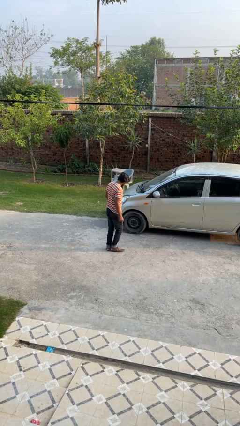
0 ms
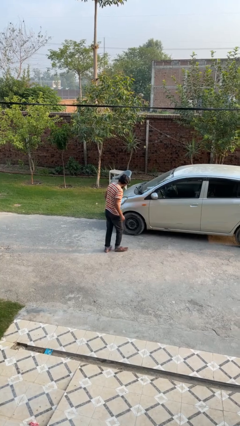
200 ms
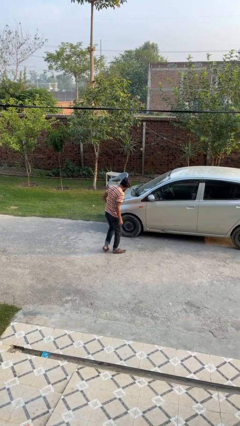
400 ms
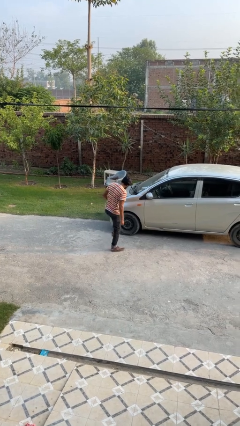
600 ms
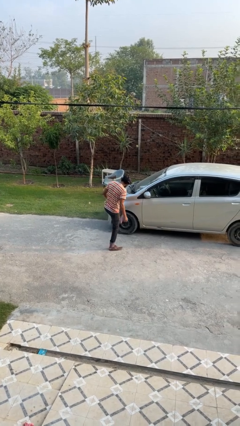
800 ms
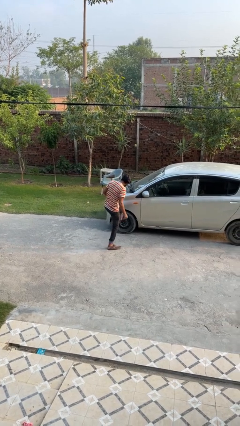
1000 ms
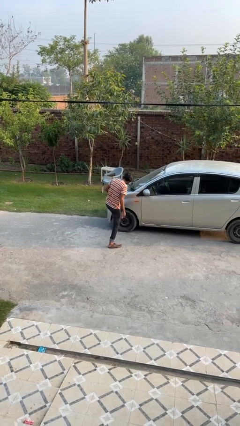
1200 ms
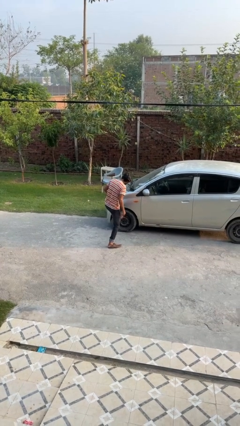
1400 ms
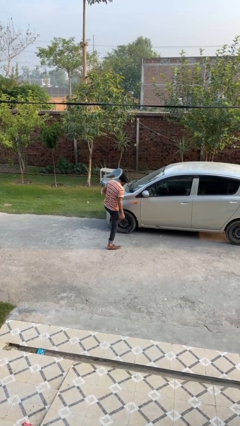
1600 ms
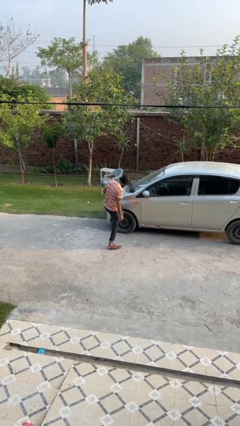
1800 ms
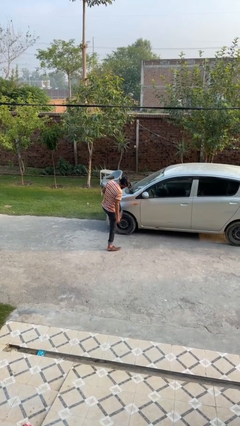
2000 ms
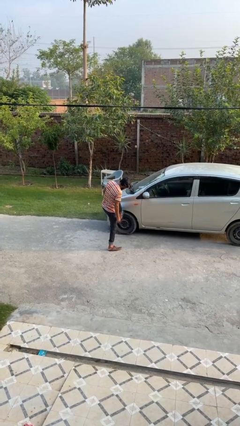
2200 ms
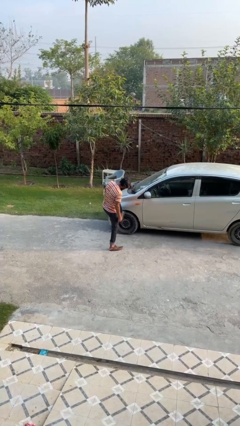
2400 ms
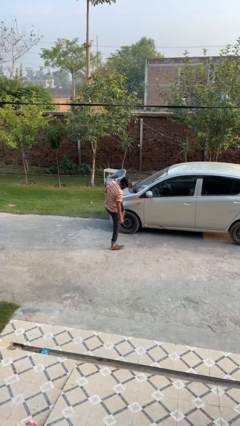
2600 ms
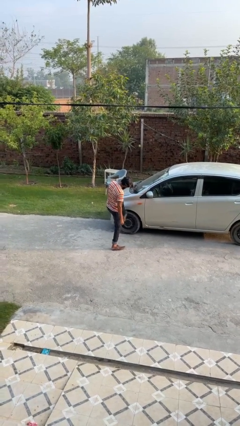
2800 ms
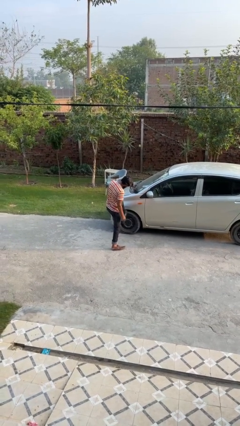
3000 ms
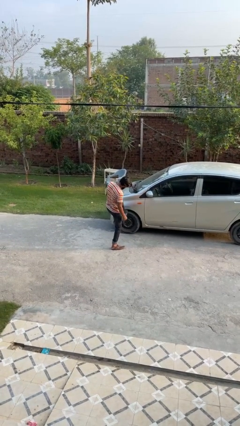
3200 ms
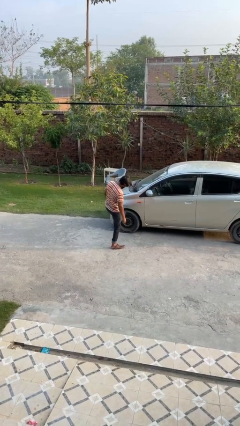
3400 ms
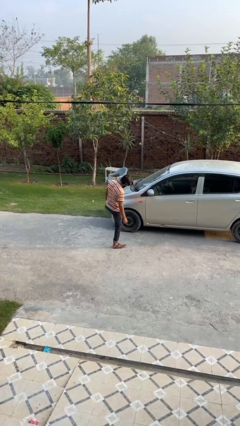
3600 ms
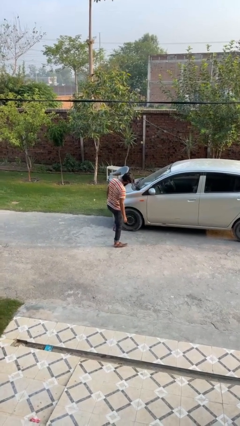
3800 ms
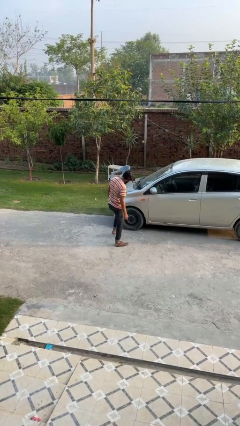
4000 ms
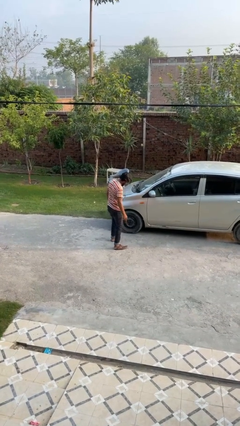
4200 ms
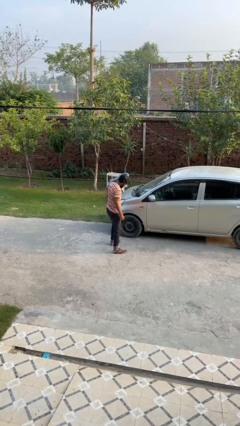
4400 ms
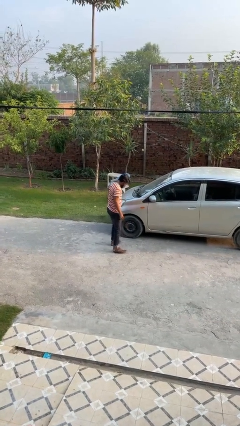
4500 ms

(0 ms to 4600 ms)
person kicks car tires

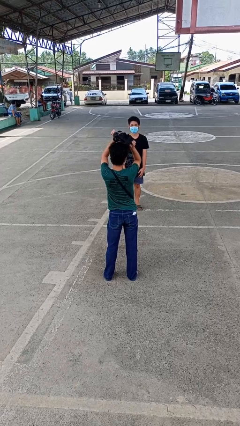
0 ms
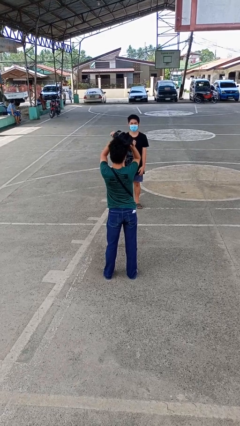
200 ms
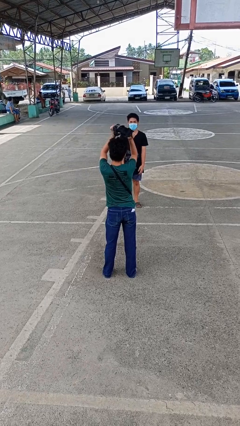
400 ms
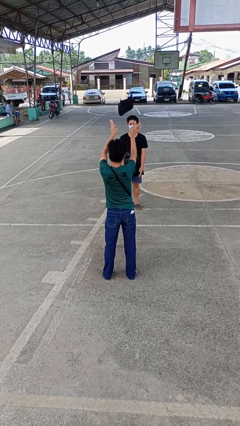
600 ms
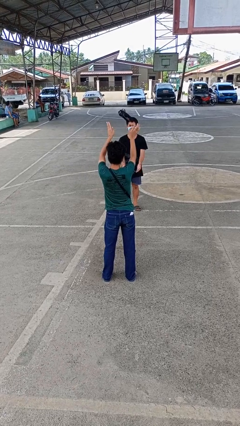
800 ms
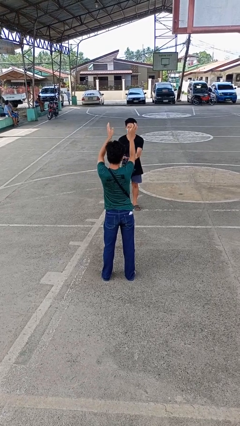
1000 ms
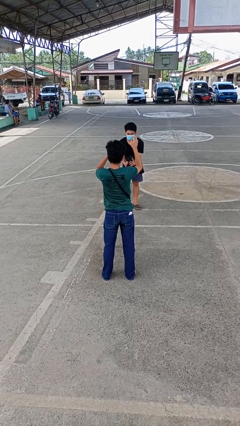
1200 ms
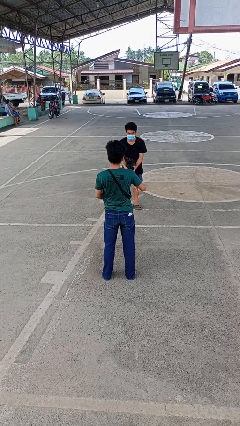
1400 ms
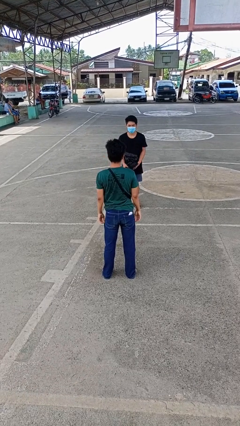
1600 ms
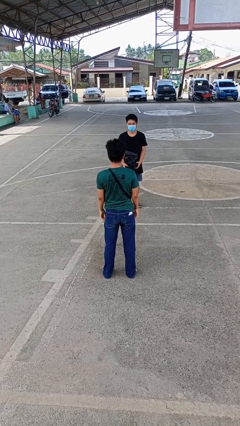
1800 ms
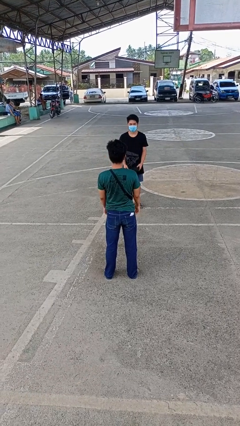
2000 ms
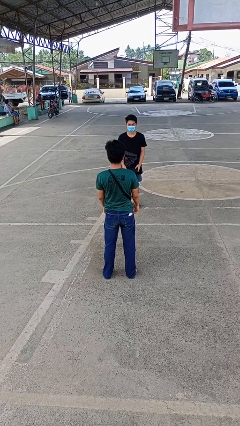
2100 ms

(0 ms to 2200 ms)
person throws object to person

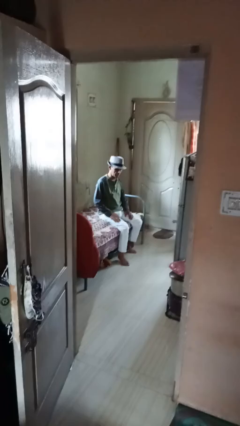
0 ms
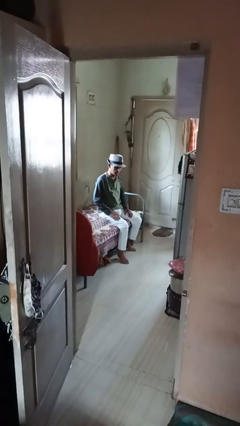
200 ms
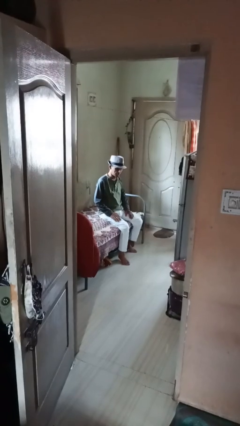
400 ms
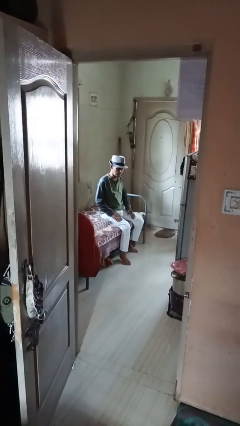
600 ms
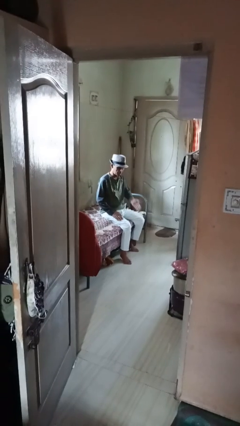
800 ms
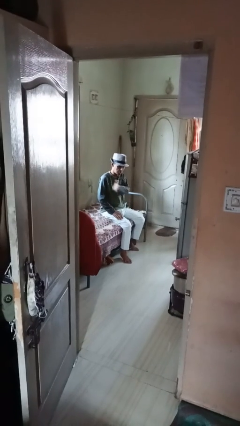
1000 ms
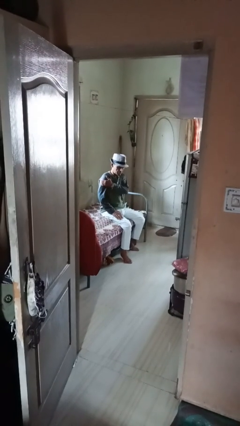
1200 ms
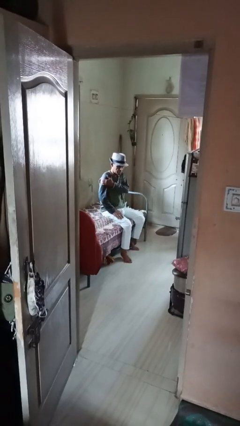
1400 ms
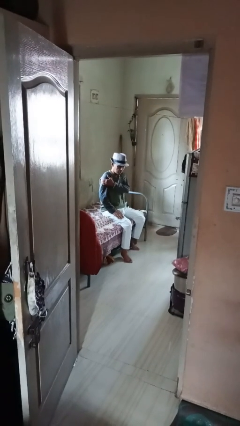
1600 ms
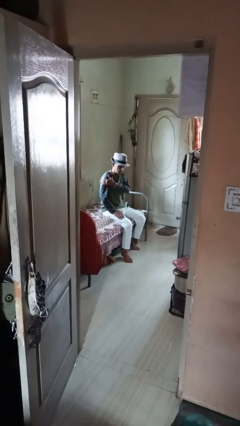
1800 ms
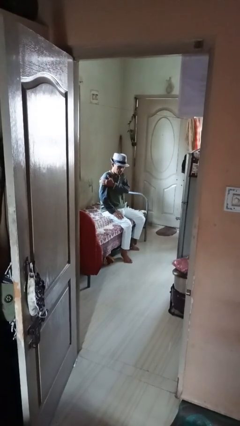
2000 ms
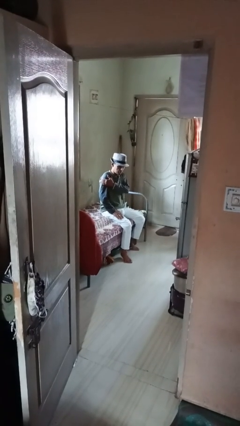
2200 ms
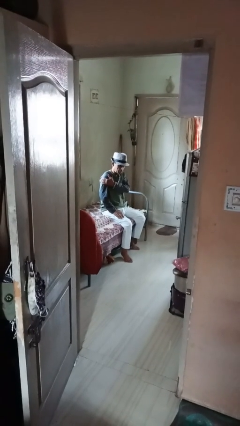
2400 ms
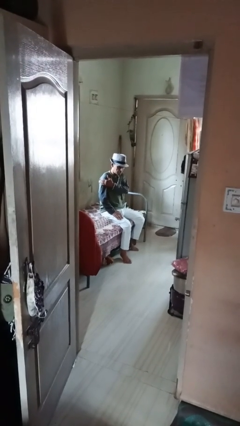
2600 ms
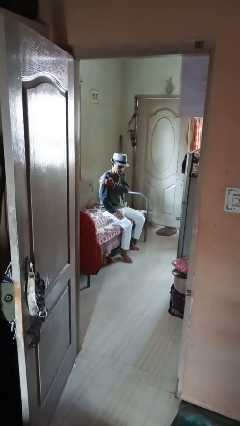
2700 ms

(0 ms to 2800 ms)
person swats bug

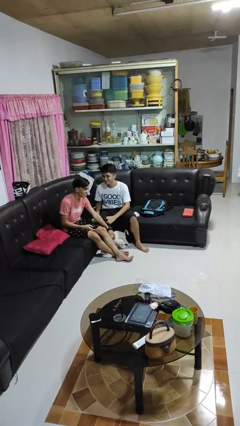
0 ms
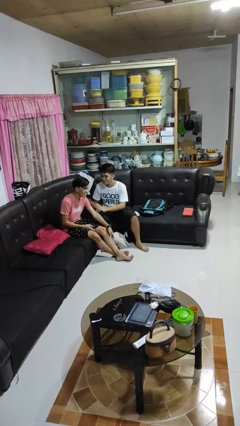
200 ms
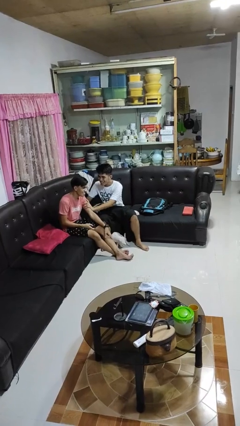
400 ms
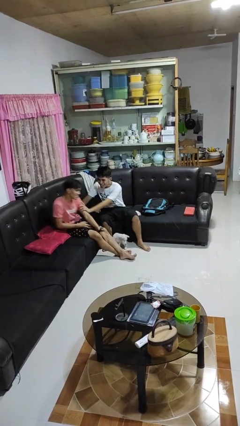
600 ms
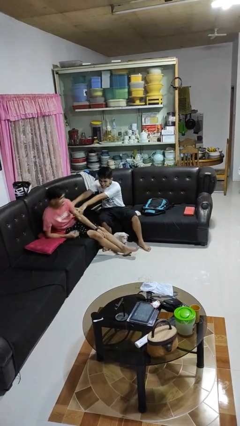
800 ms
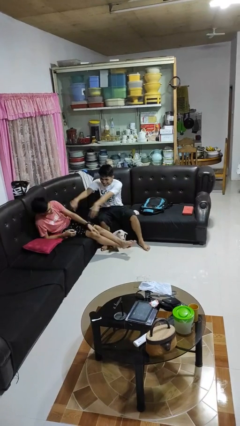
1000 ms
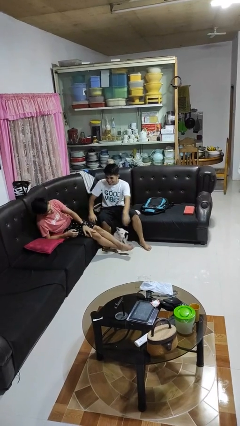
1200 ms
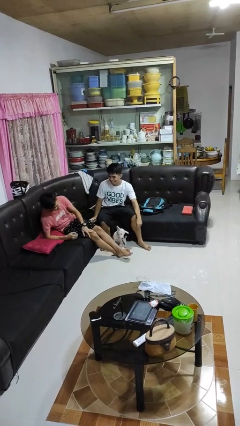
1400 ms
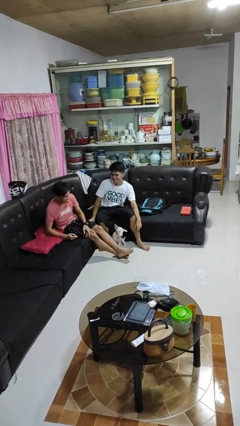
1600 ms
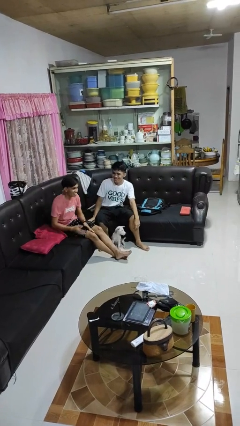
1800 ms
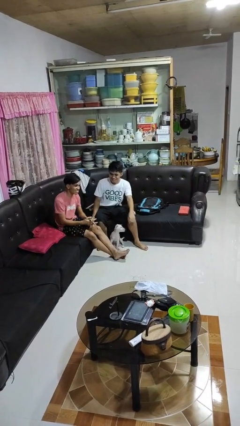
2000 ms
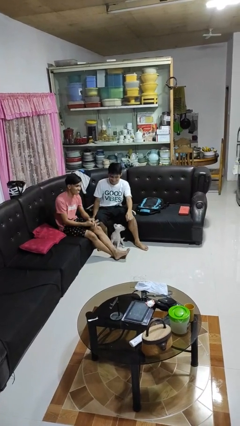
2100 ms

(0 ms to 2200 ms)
person shoves person

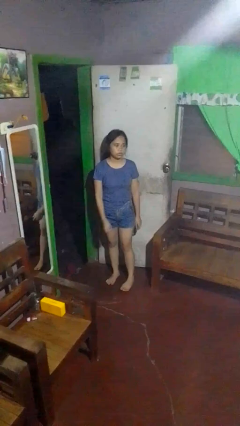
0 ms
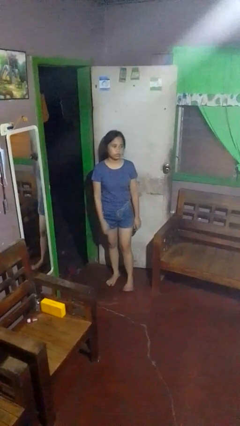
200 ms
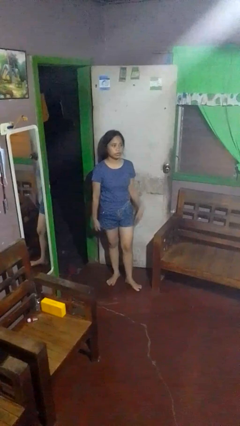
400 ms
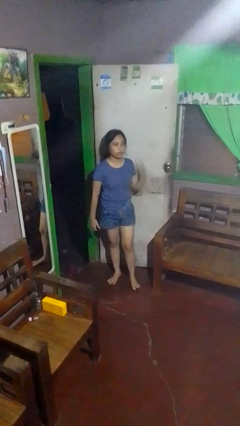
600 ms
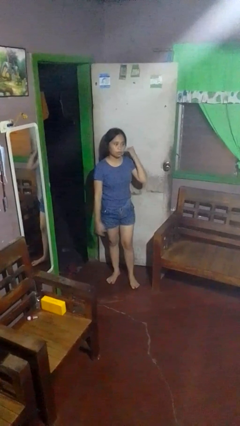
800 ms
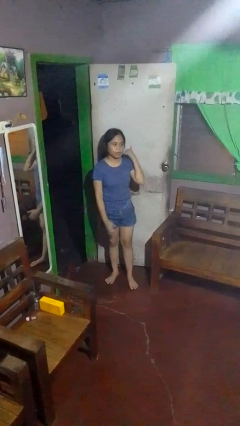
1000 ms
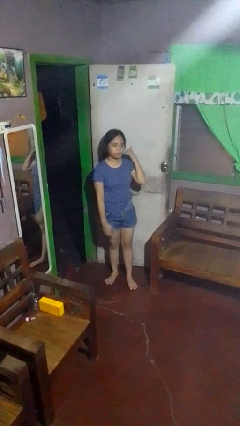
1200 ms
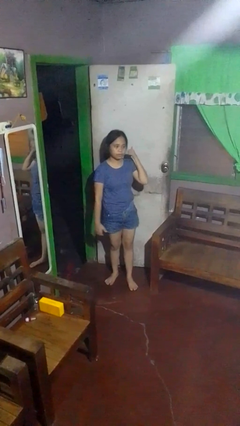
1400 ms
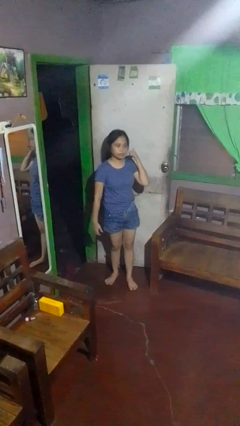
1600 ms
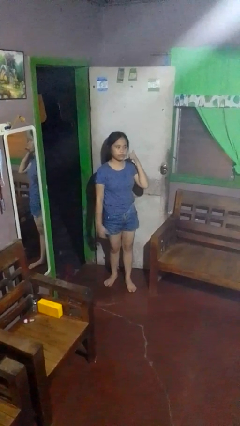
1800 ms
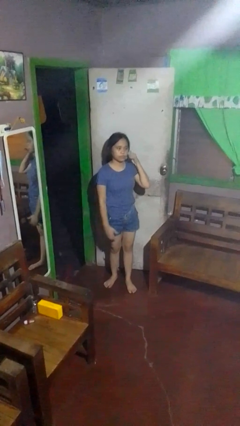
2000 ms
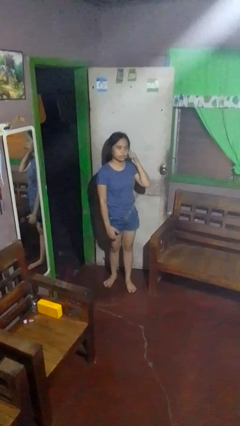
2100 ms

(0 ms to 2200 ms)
person gestures call me

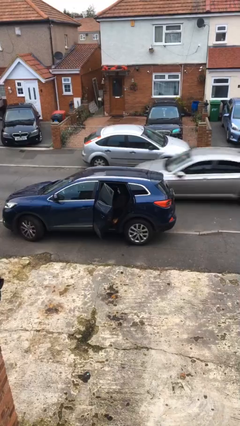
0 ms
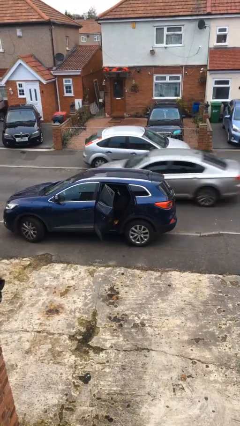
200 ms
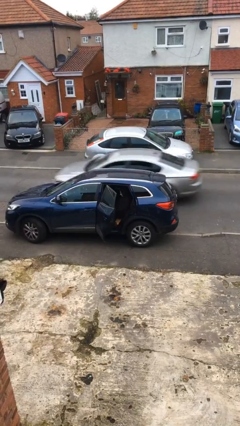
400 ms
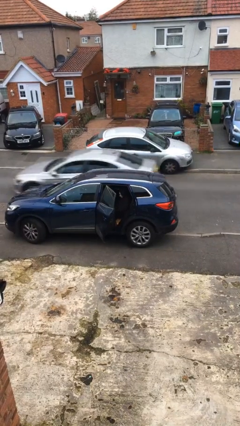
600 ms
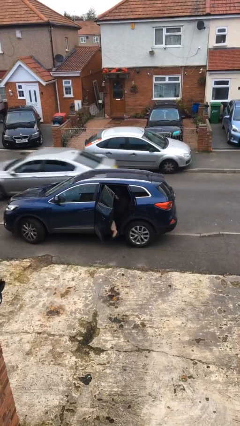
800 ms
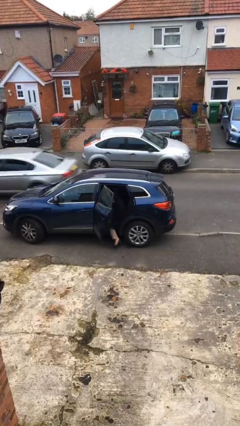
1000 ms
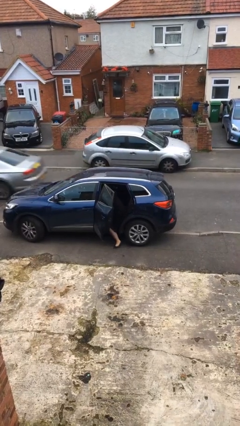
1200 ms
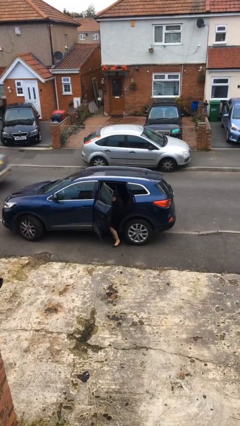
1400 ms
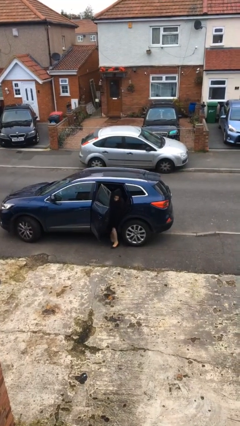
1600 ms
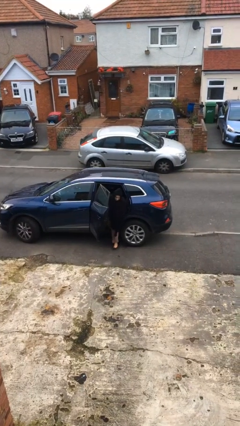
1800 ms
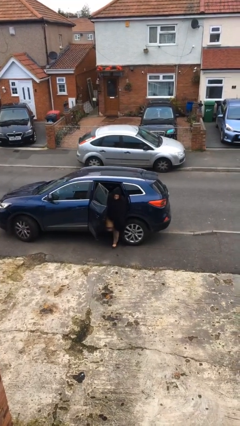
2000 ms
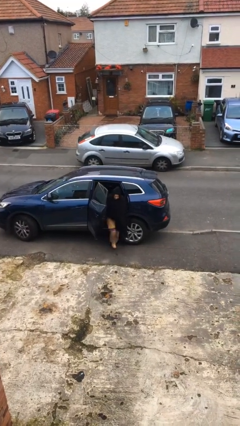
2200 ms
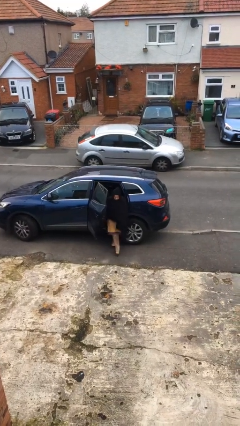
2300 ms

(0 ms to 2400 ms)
person exits car

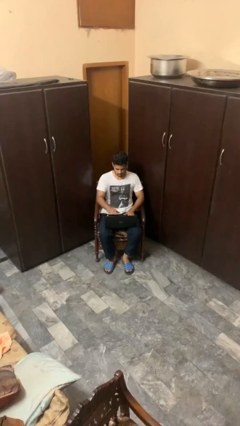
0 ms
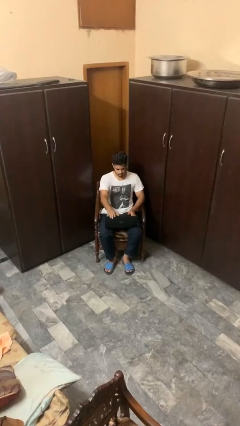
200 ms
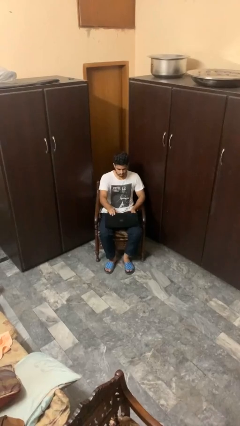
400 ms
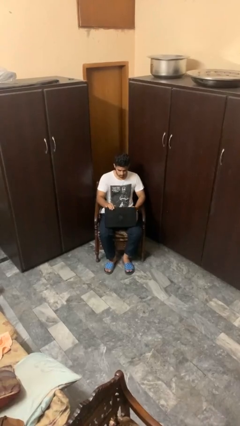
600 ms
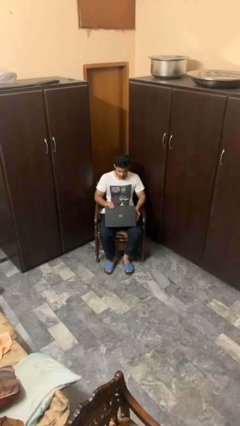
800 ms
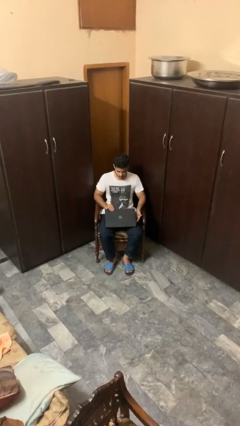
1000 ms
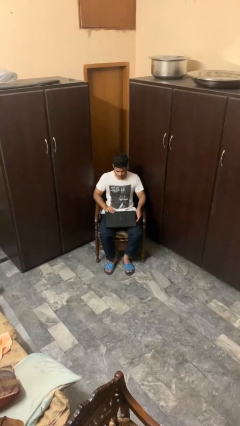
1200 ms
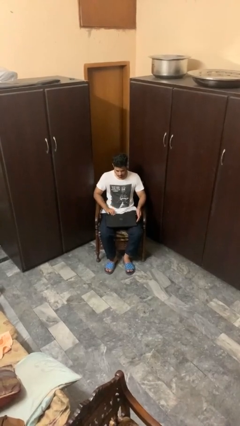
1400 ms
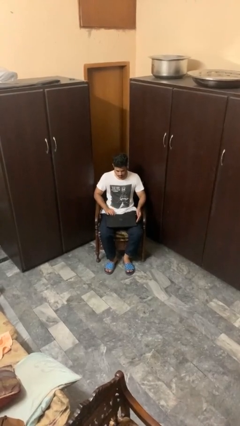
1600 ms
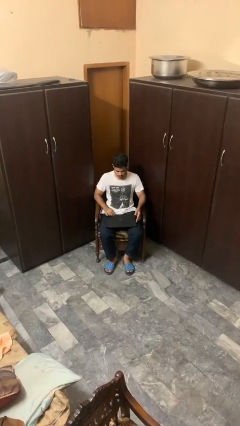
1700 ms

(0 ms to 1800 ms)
person closes laptop
